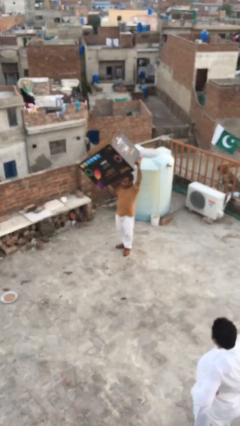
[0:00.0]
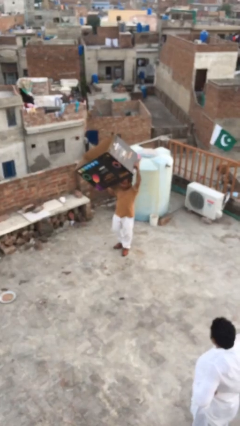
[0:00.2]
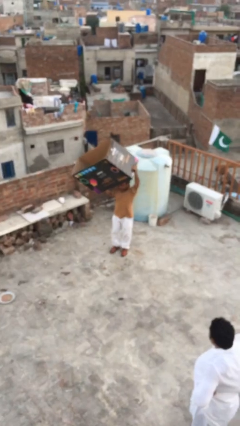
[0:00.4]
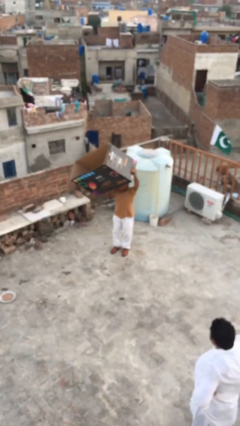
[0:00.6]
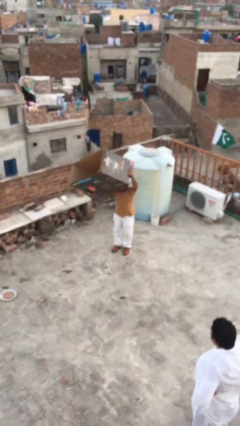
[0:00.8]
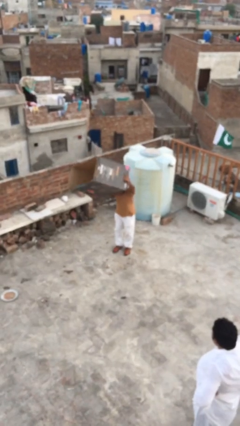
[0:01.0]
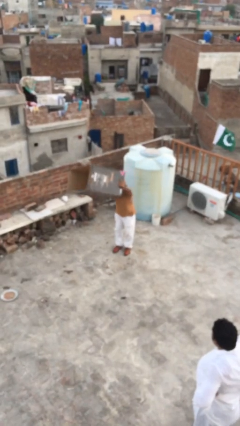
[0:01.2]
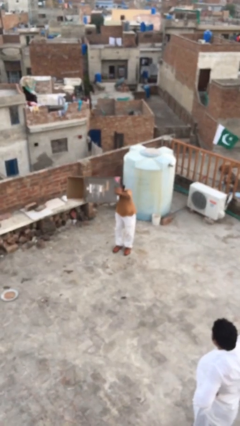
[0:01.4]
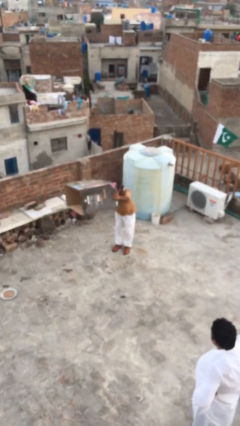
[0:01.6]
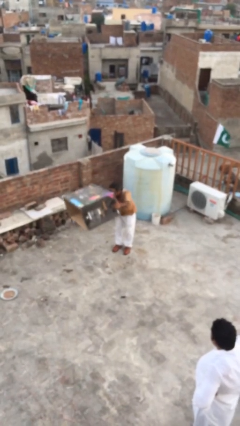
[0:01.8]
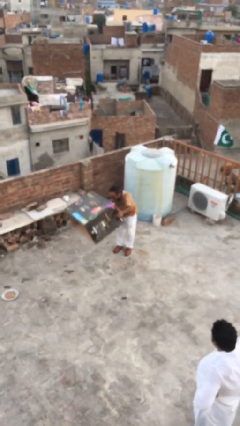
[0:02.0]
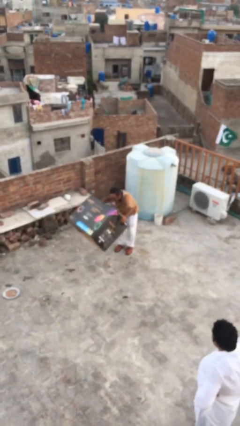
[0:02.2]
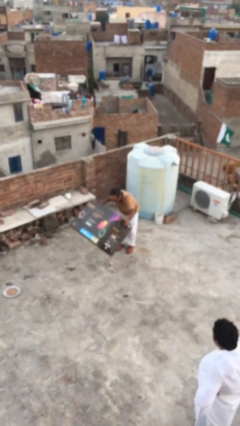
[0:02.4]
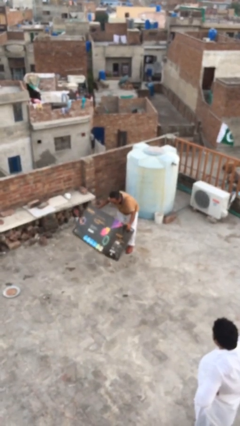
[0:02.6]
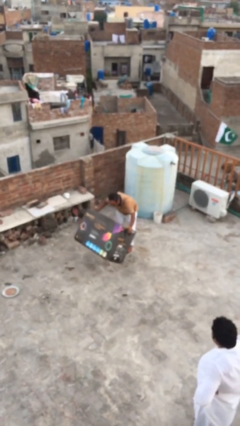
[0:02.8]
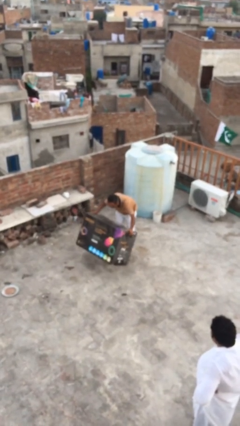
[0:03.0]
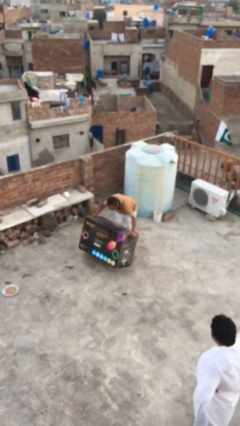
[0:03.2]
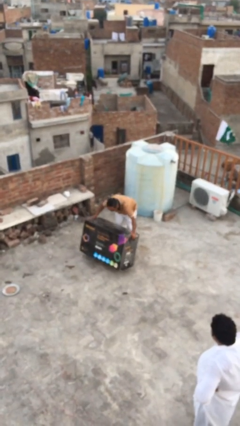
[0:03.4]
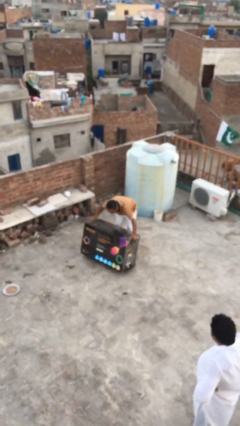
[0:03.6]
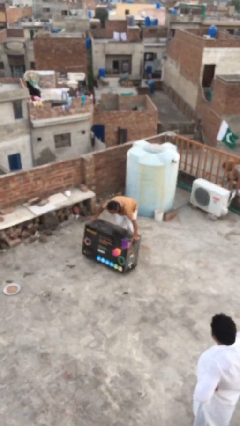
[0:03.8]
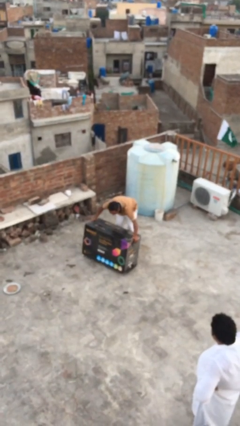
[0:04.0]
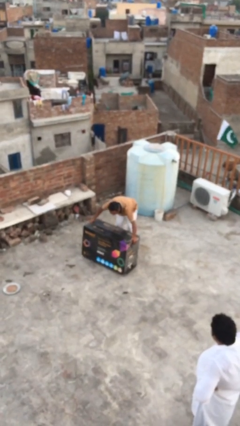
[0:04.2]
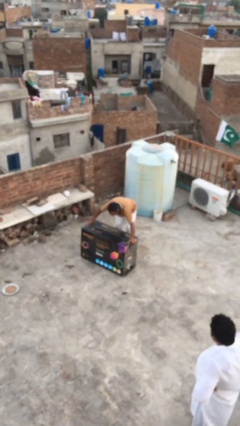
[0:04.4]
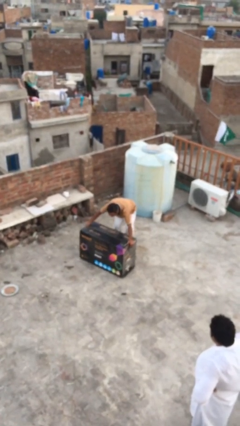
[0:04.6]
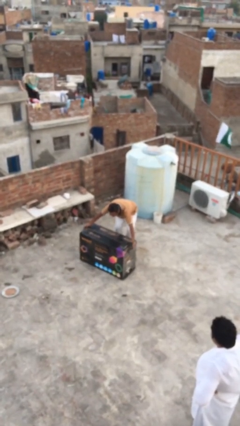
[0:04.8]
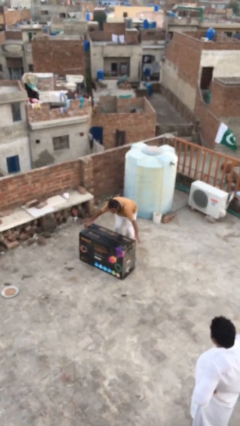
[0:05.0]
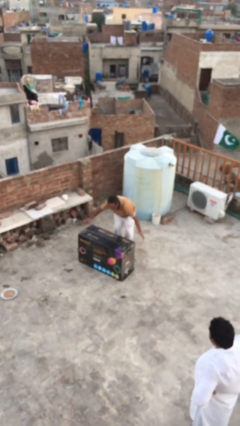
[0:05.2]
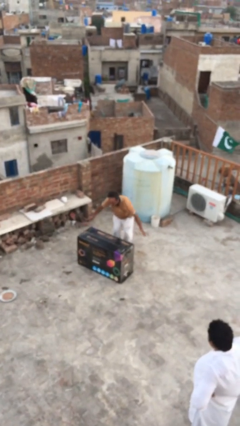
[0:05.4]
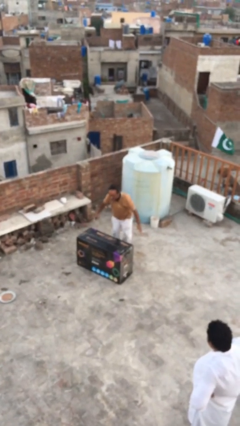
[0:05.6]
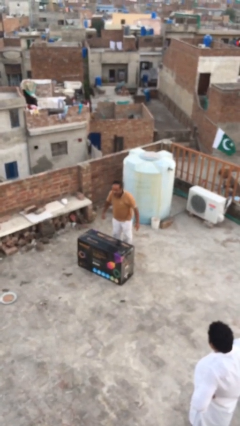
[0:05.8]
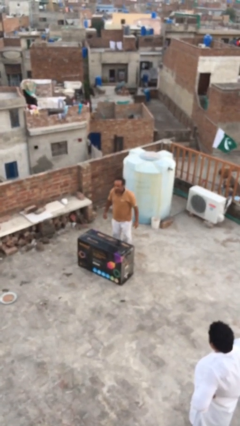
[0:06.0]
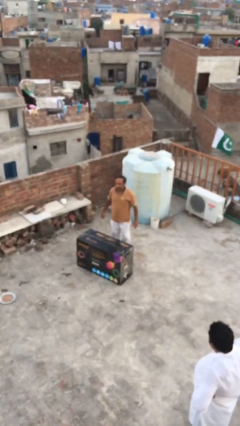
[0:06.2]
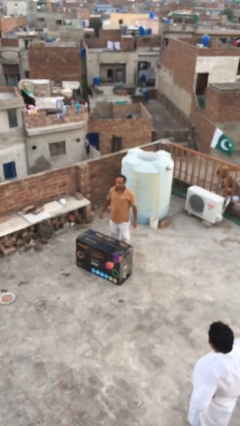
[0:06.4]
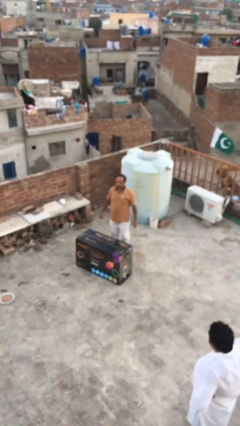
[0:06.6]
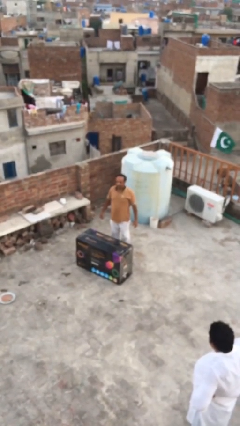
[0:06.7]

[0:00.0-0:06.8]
person puts down object on floor

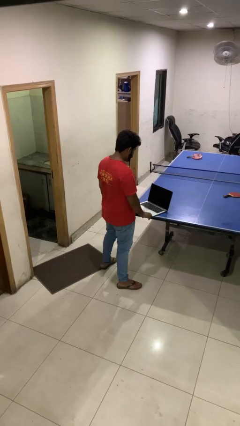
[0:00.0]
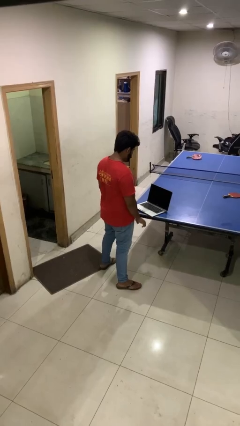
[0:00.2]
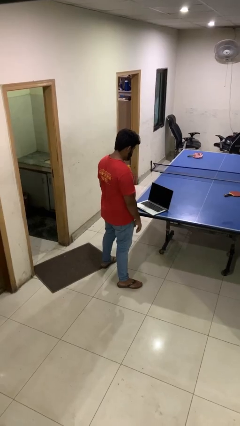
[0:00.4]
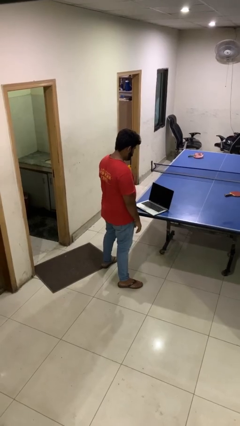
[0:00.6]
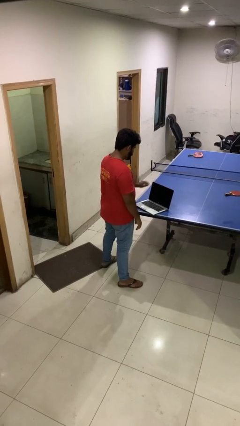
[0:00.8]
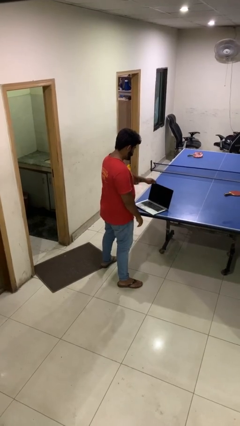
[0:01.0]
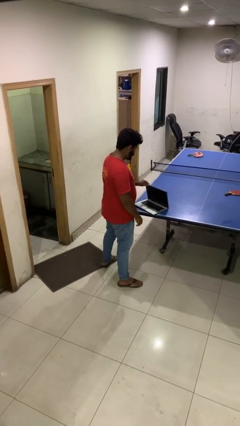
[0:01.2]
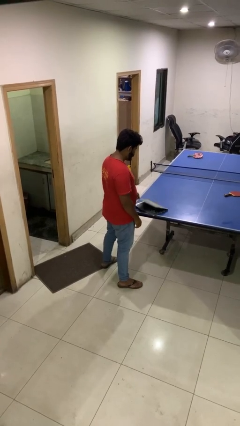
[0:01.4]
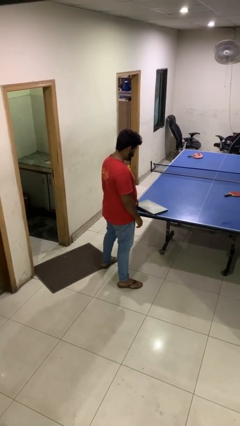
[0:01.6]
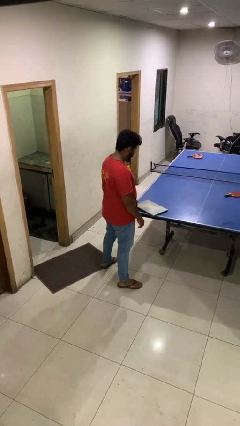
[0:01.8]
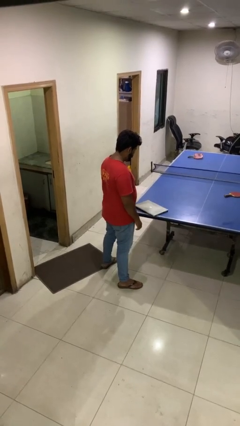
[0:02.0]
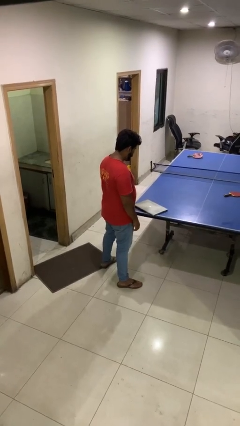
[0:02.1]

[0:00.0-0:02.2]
person closes laptop

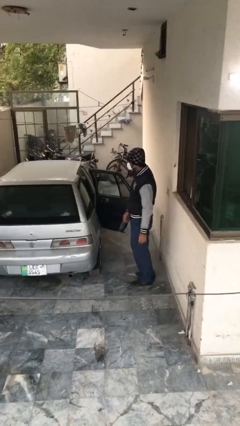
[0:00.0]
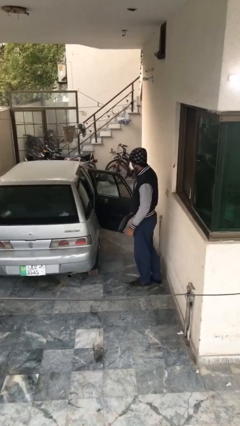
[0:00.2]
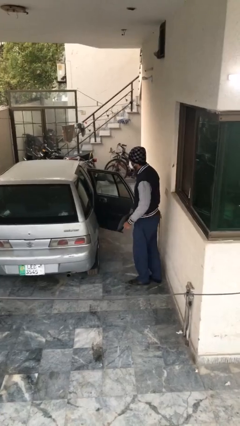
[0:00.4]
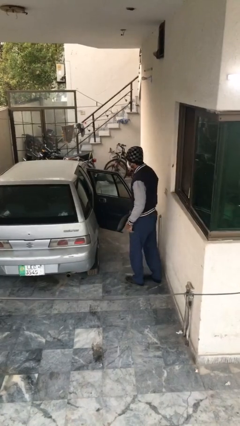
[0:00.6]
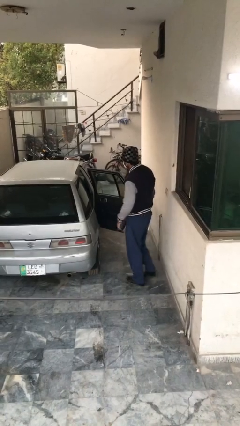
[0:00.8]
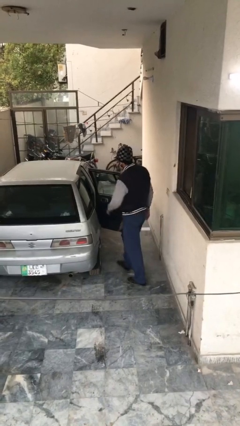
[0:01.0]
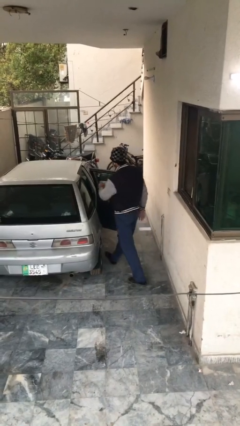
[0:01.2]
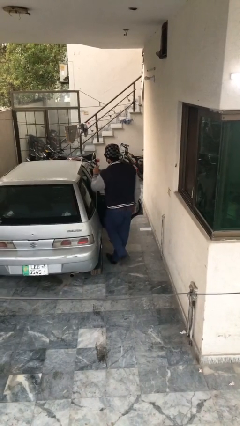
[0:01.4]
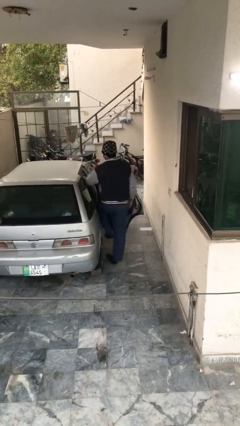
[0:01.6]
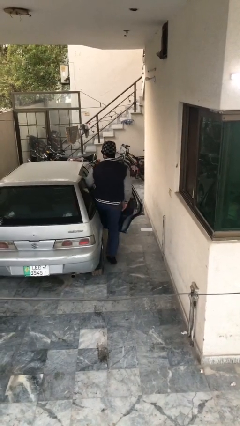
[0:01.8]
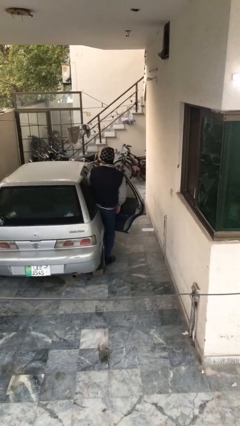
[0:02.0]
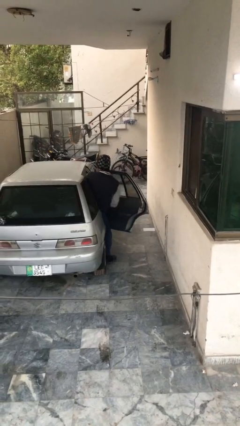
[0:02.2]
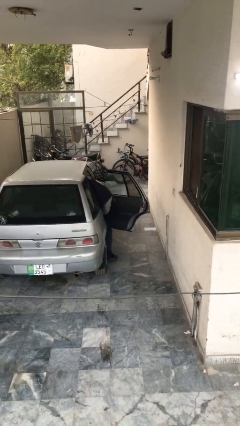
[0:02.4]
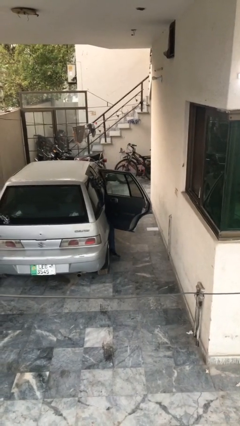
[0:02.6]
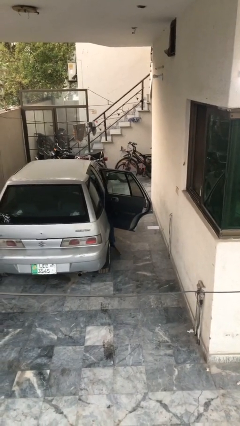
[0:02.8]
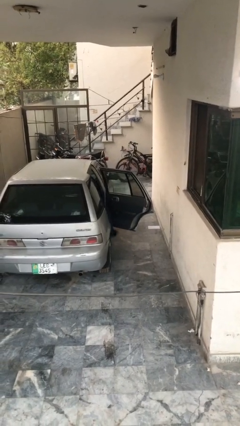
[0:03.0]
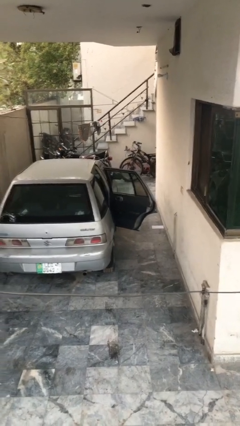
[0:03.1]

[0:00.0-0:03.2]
person enters car

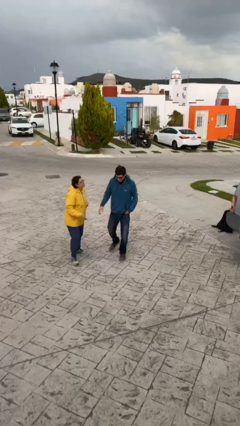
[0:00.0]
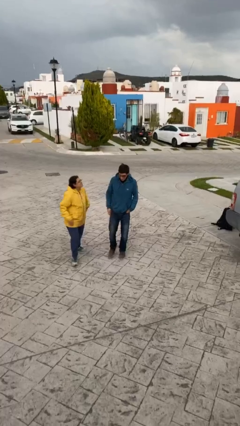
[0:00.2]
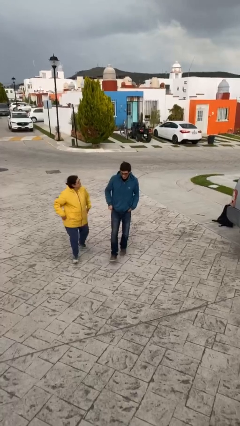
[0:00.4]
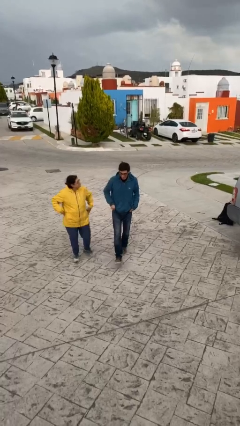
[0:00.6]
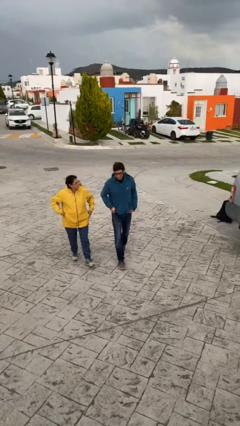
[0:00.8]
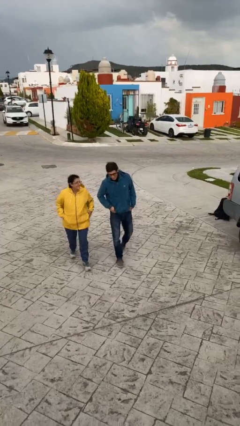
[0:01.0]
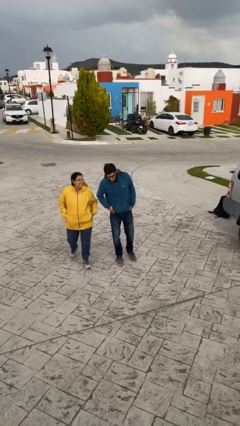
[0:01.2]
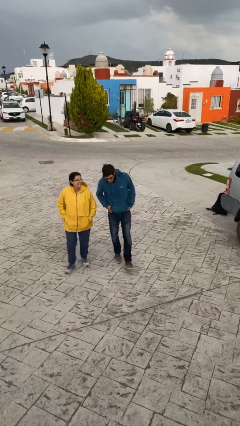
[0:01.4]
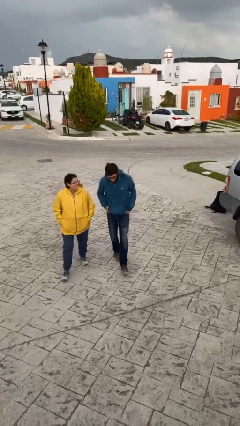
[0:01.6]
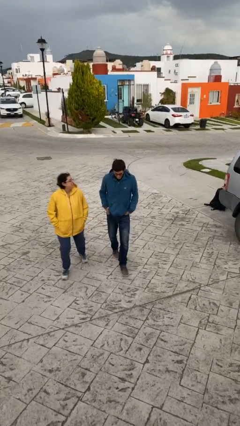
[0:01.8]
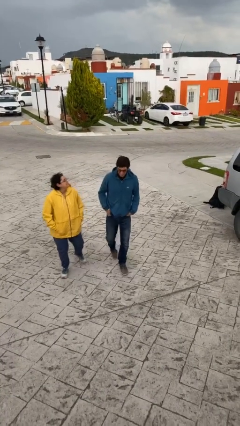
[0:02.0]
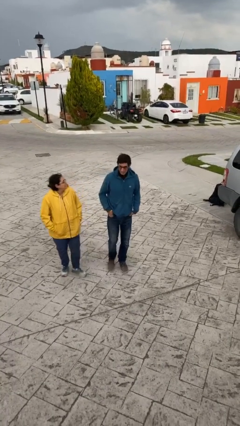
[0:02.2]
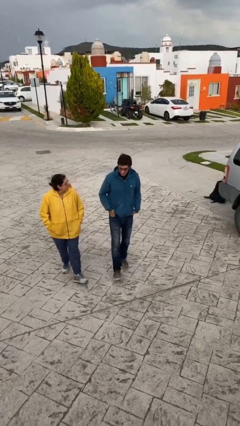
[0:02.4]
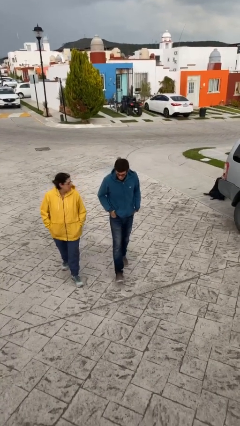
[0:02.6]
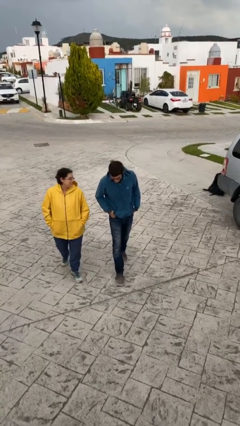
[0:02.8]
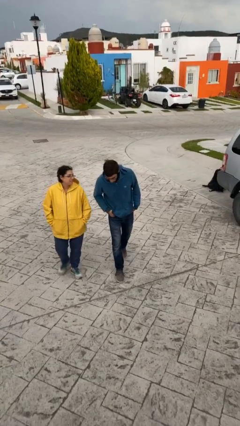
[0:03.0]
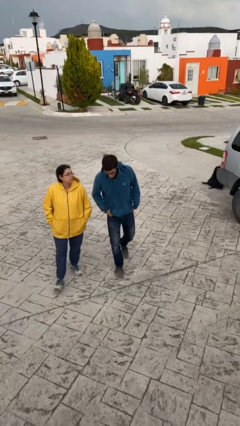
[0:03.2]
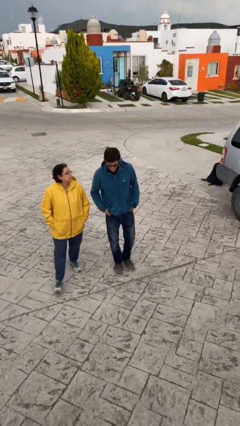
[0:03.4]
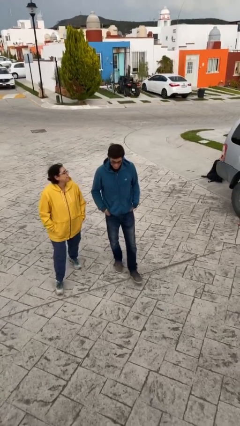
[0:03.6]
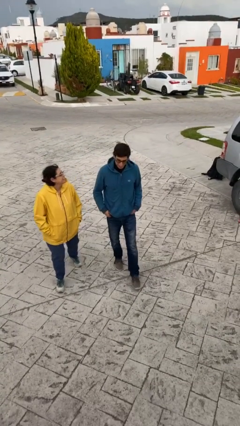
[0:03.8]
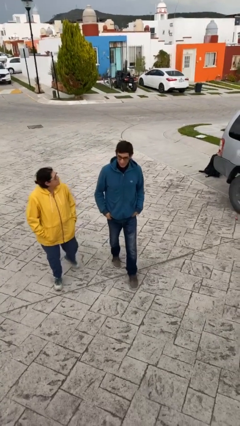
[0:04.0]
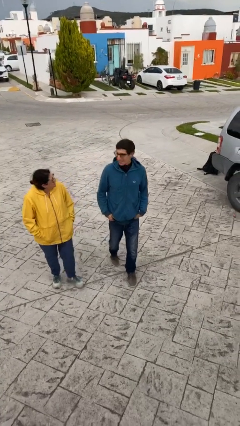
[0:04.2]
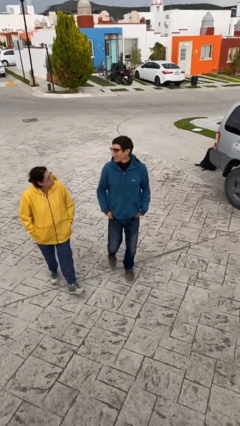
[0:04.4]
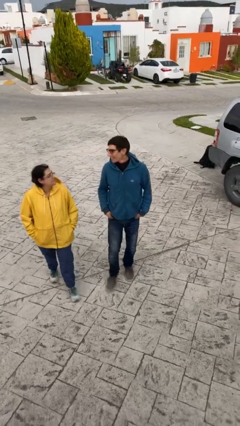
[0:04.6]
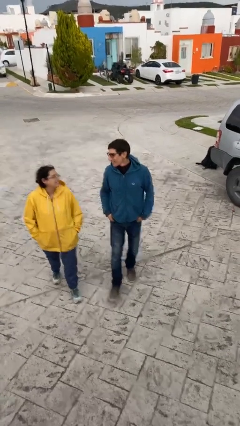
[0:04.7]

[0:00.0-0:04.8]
person talks to person

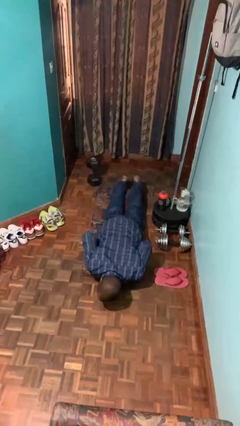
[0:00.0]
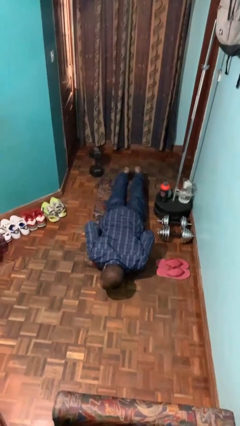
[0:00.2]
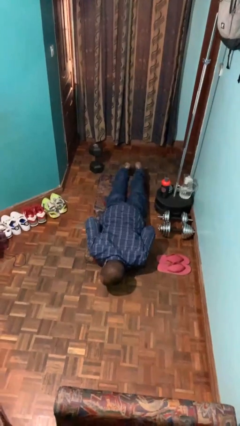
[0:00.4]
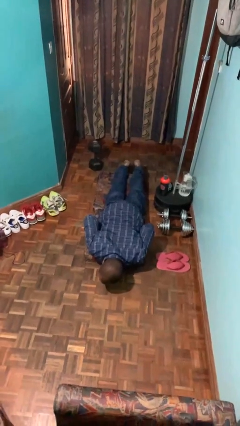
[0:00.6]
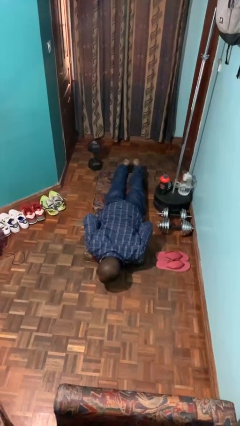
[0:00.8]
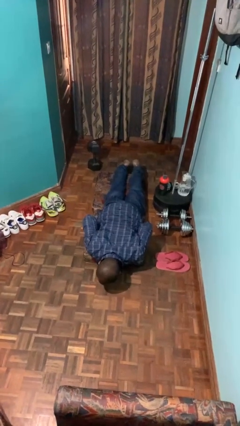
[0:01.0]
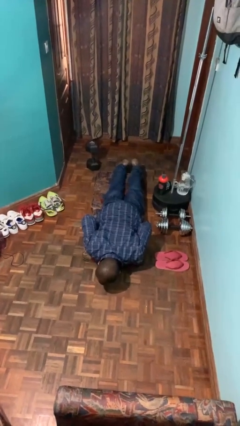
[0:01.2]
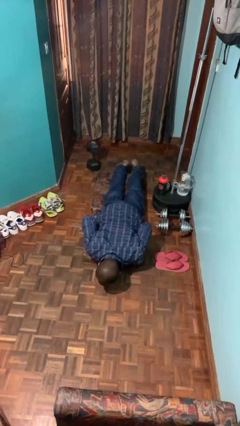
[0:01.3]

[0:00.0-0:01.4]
person lies down on floor
